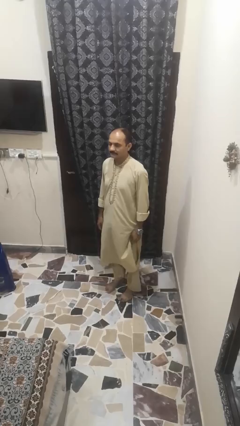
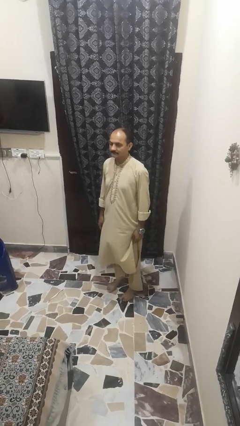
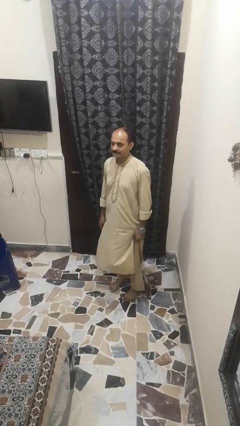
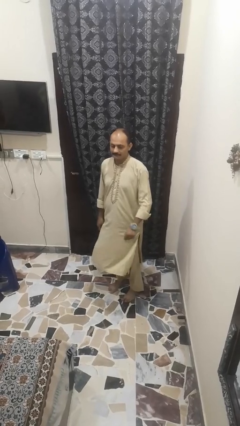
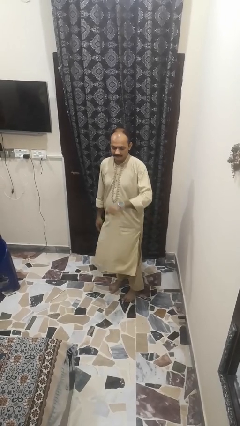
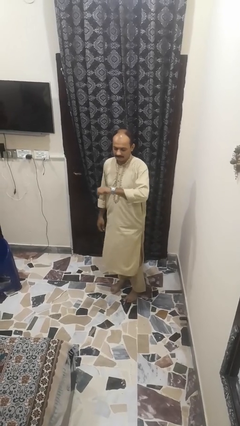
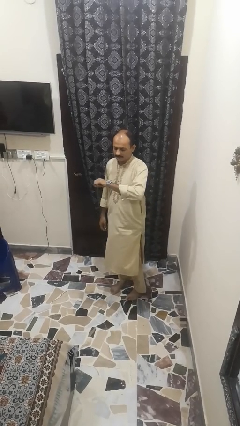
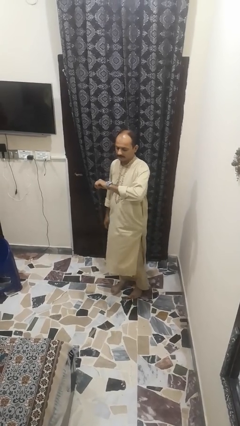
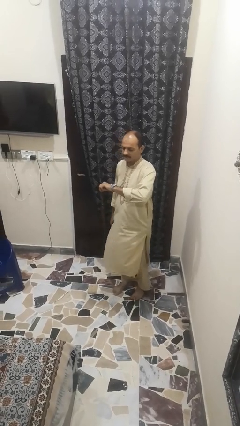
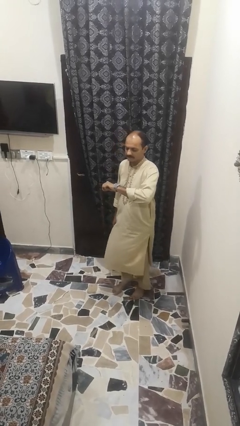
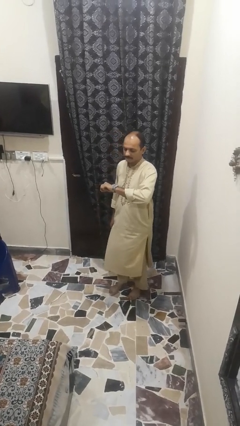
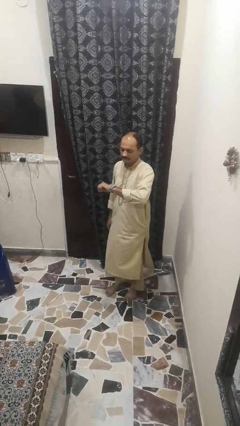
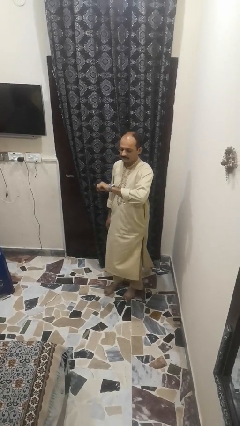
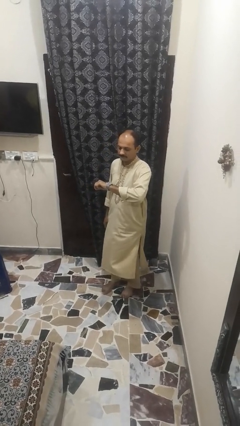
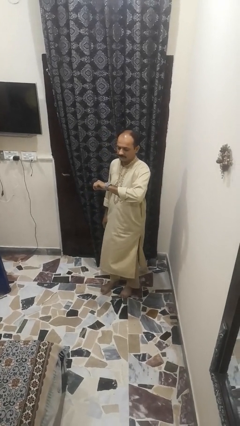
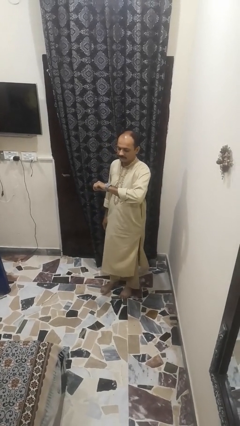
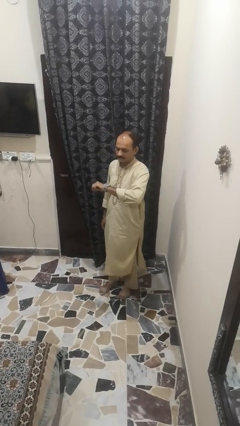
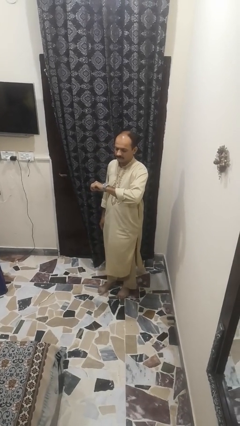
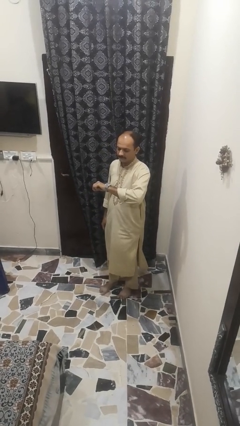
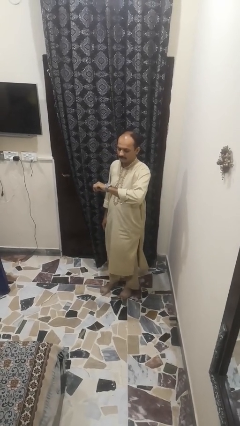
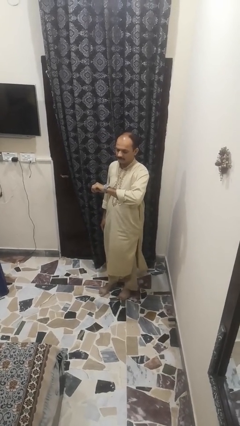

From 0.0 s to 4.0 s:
person looks at wristwatch

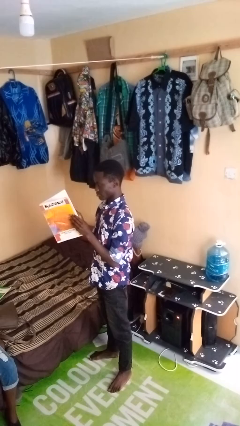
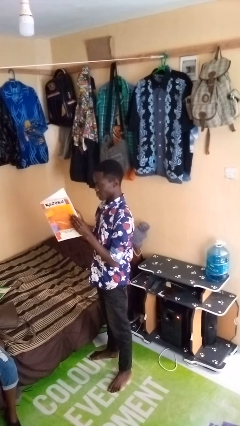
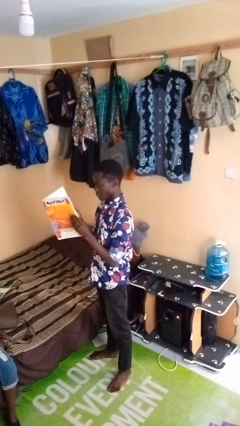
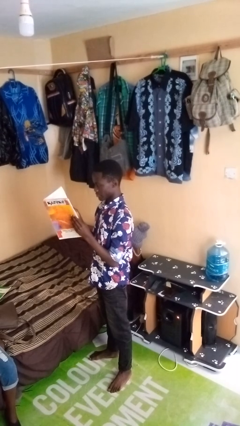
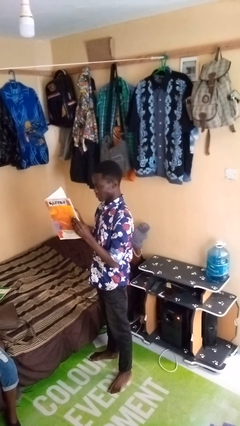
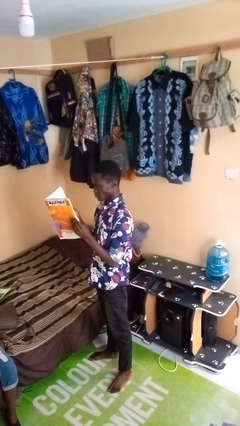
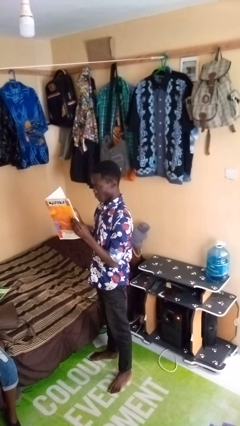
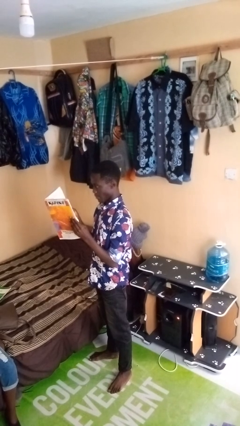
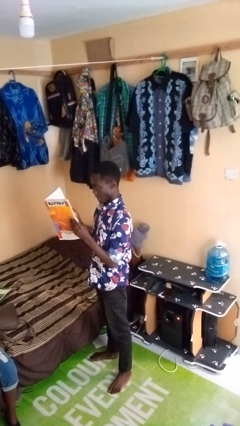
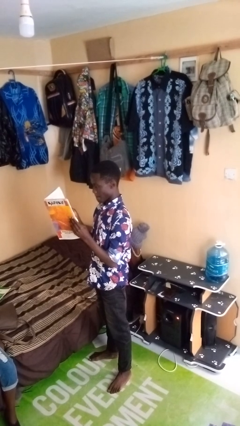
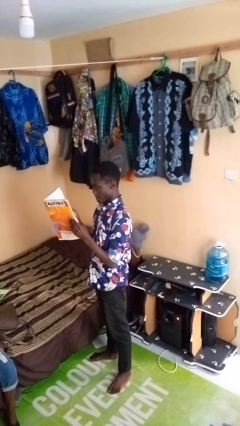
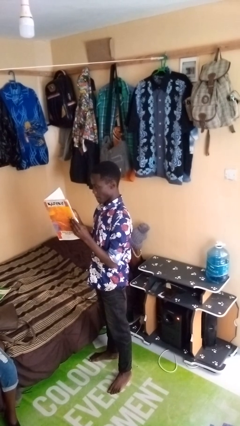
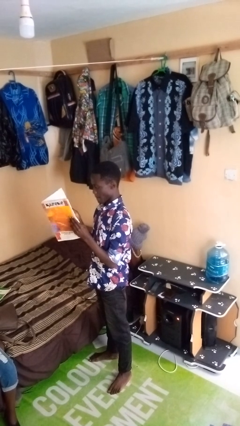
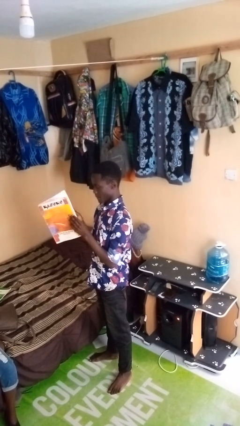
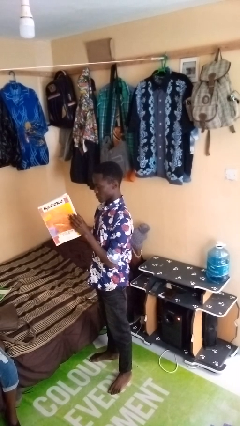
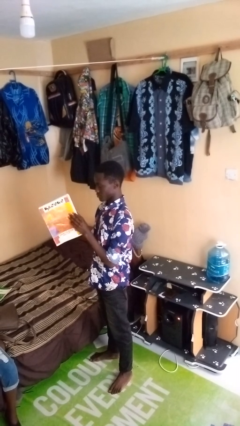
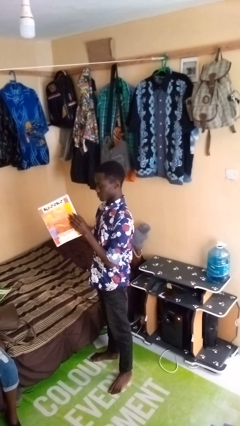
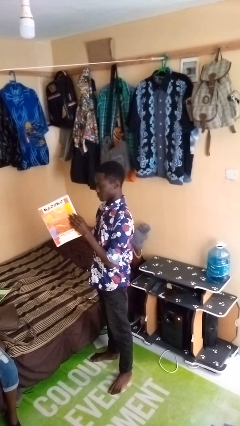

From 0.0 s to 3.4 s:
person reads newspaper

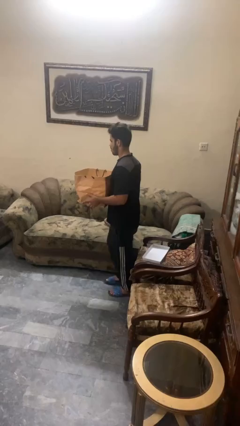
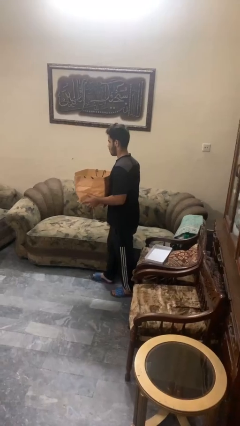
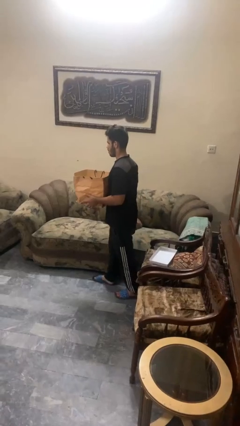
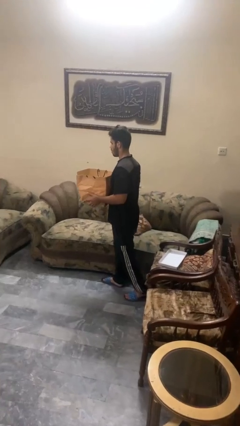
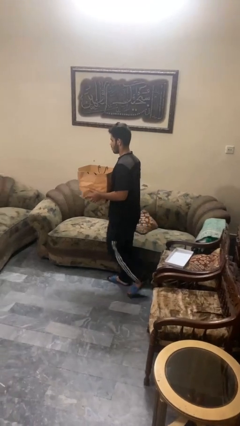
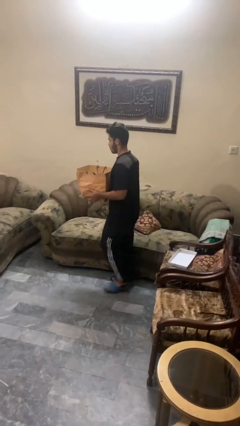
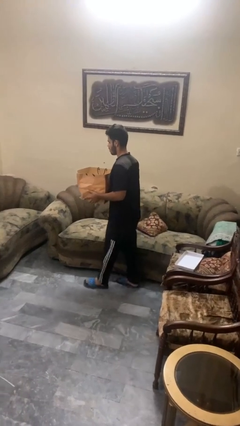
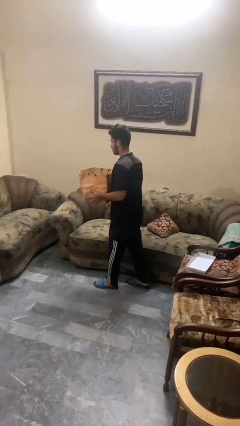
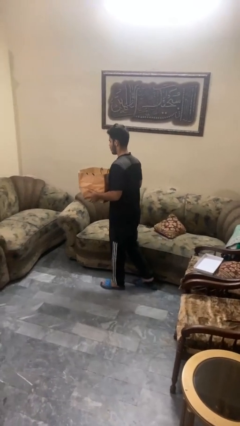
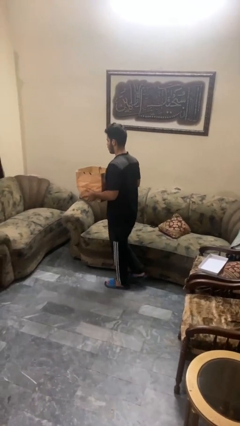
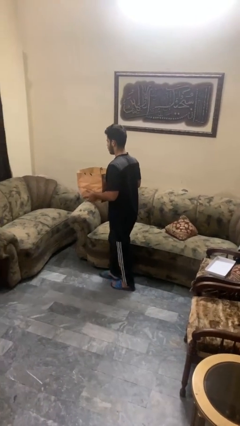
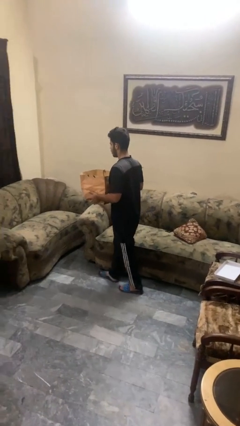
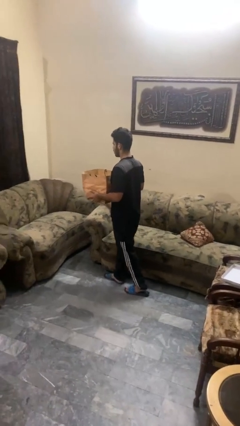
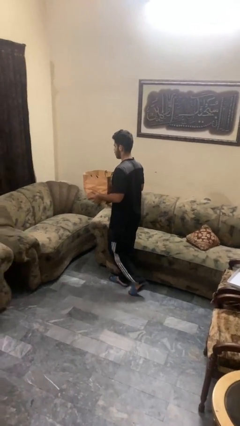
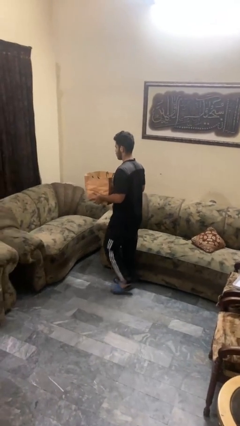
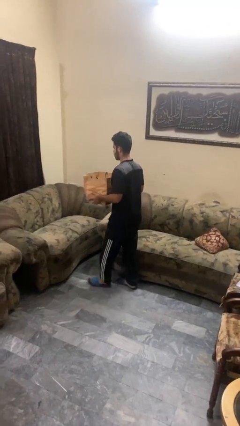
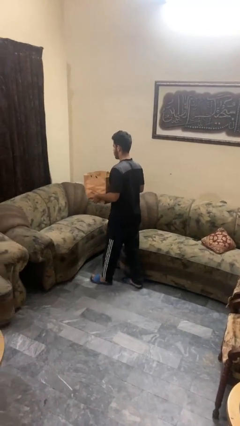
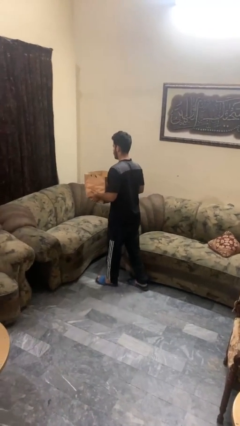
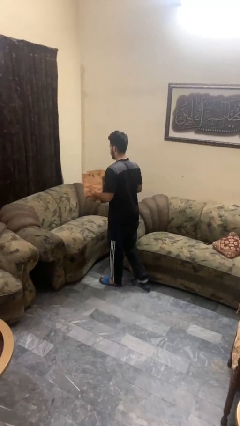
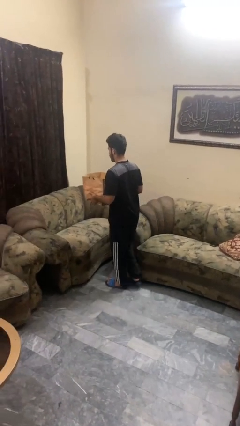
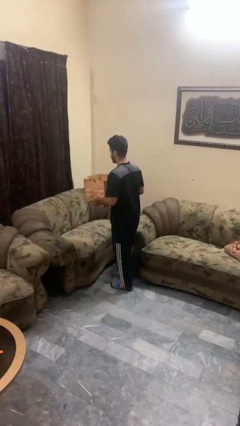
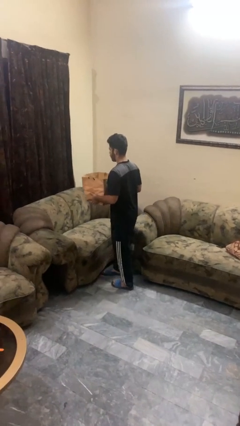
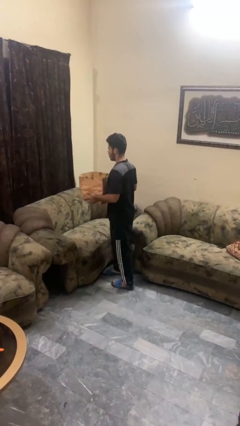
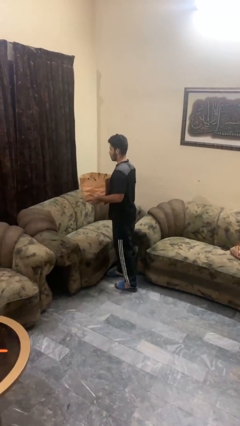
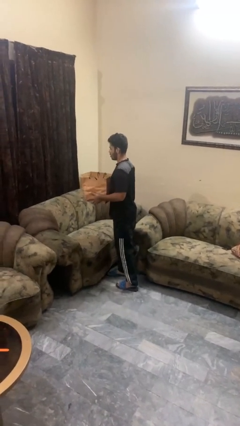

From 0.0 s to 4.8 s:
person carries groceries

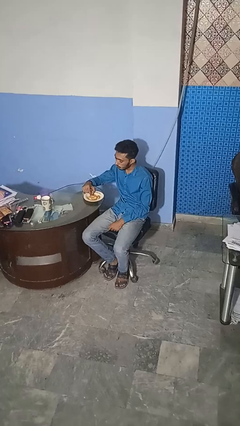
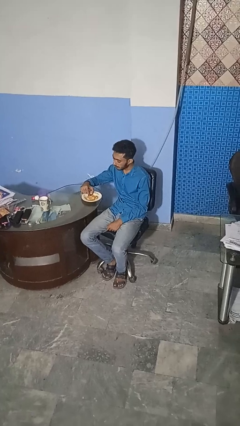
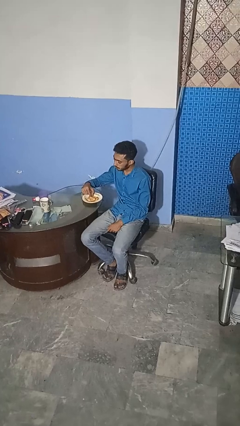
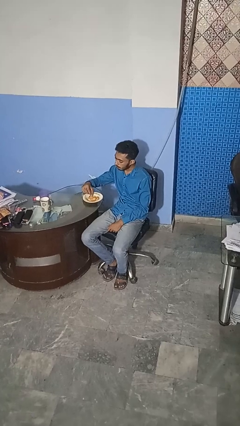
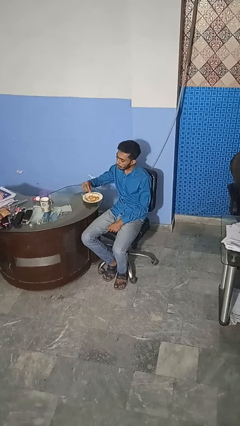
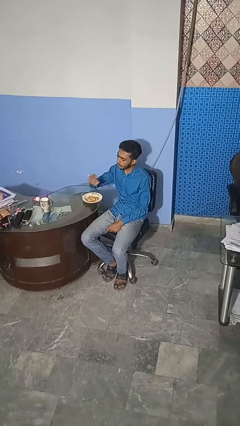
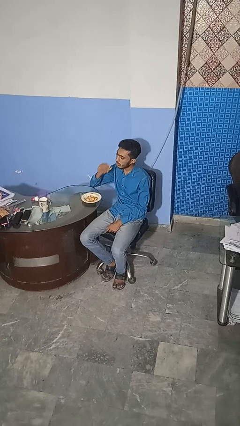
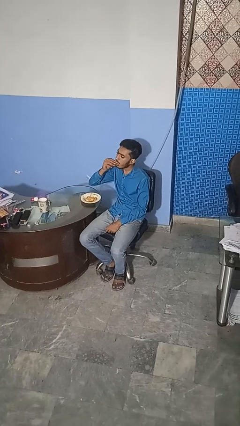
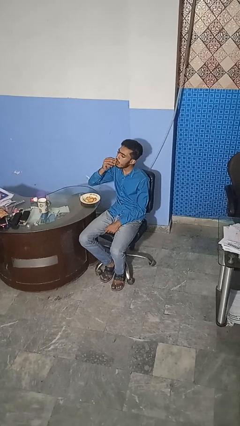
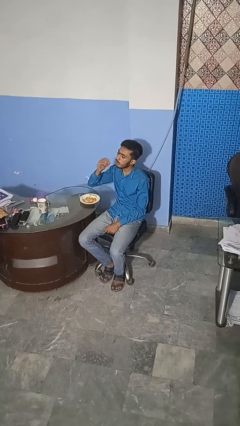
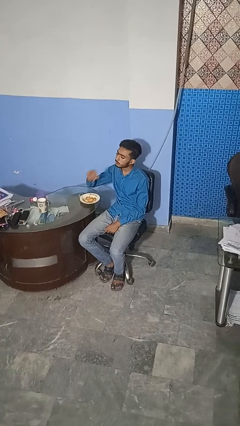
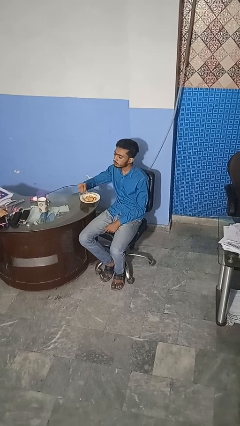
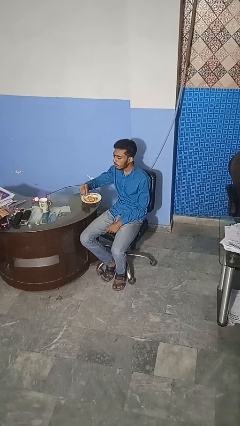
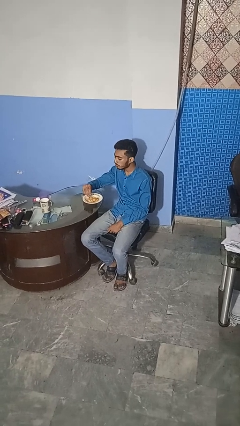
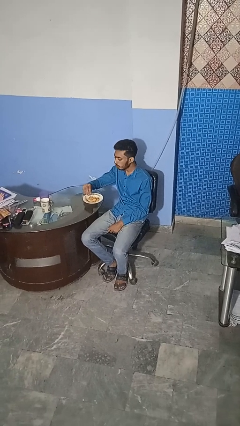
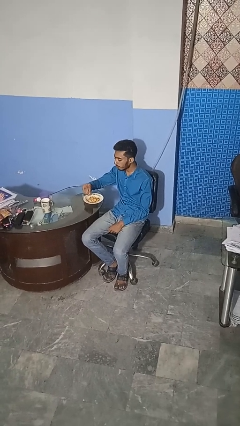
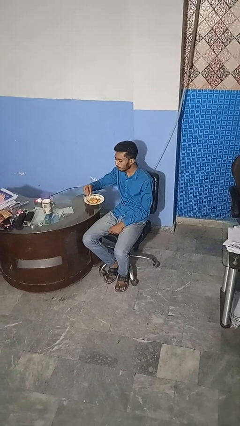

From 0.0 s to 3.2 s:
person eats with hands

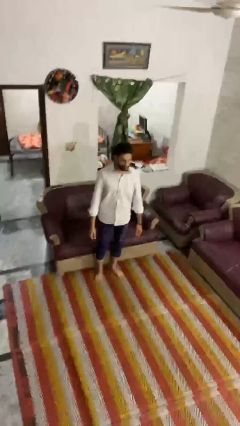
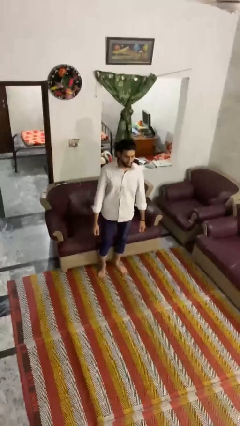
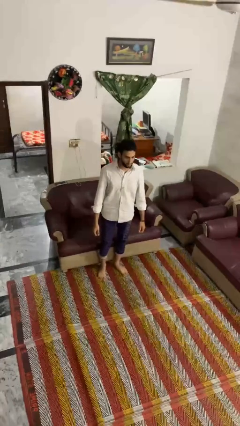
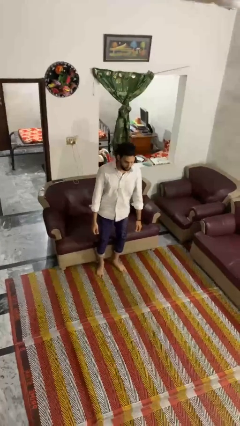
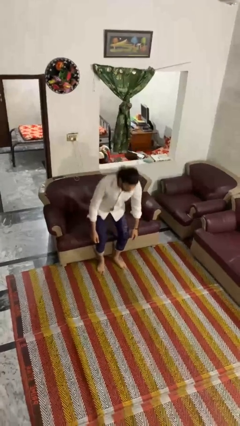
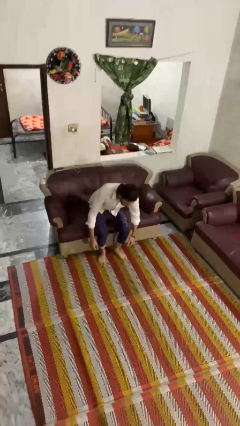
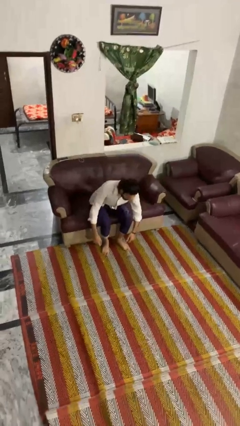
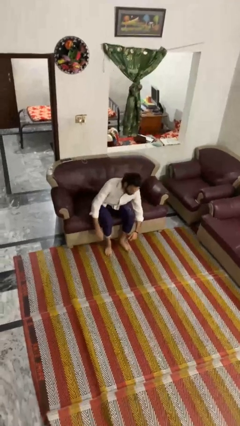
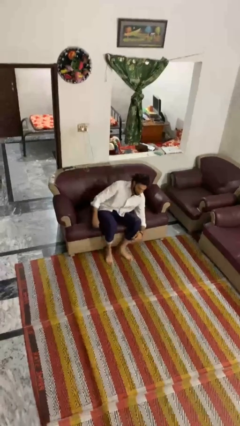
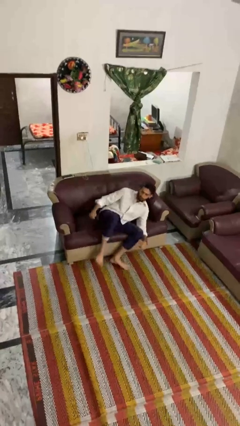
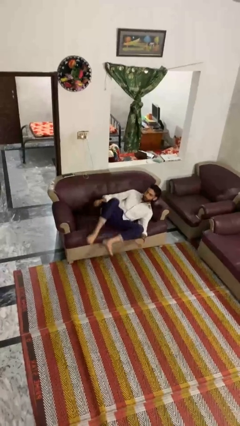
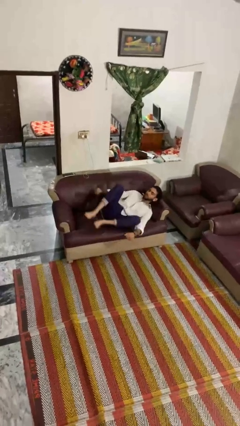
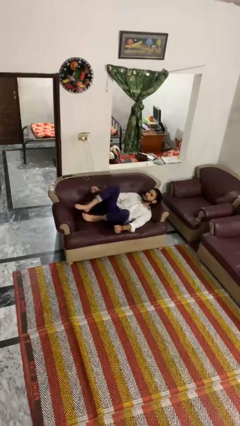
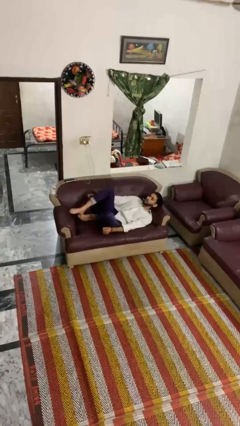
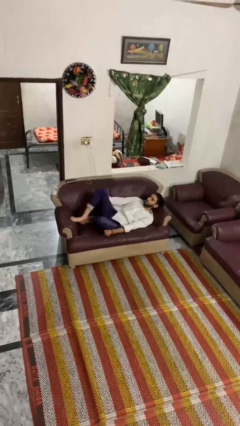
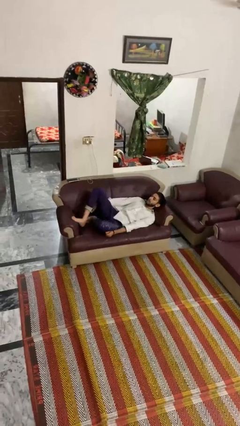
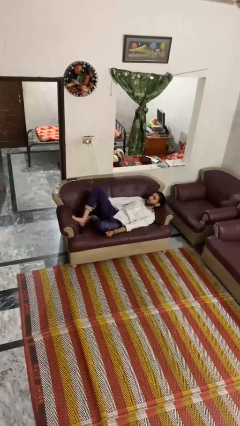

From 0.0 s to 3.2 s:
person lies down on couch
